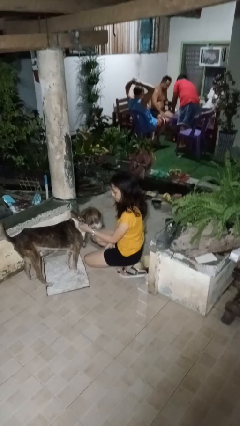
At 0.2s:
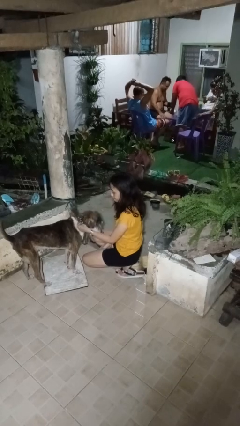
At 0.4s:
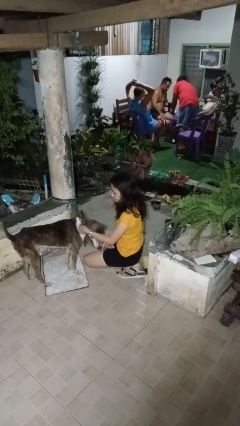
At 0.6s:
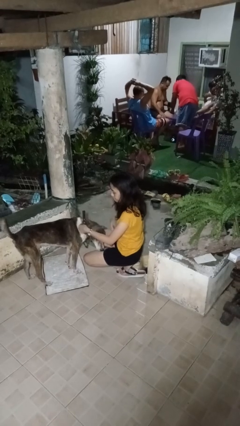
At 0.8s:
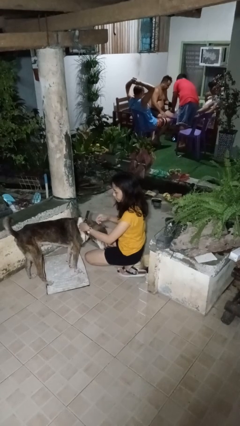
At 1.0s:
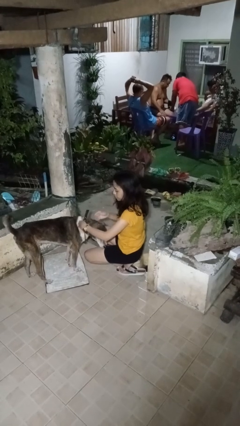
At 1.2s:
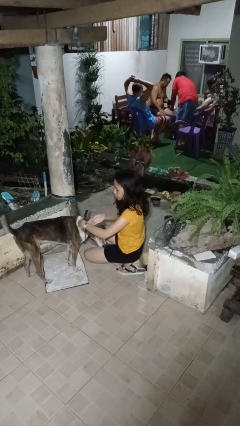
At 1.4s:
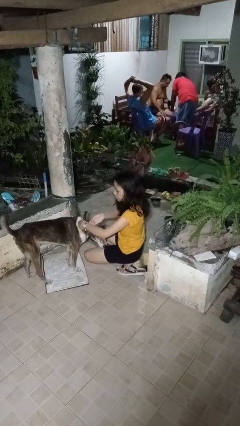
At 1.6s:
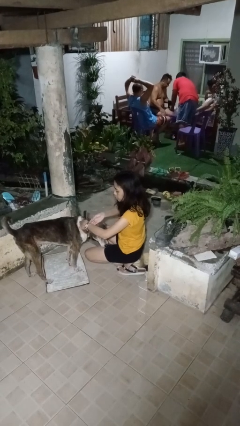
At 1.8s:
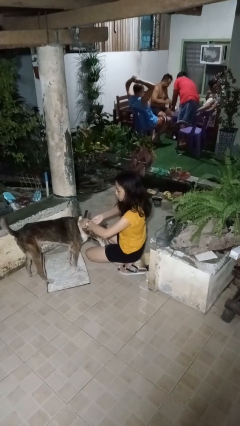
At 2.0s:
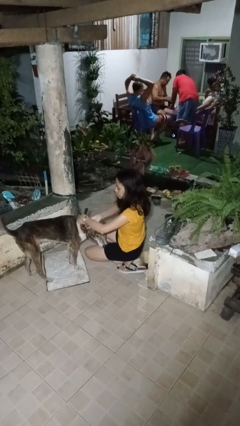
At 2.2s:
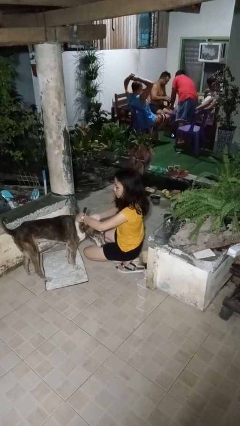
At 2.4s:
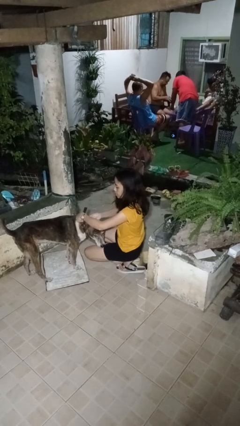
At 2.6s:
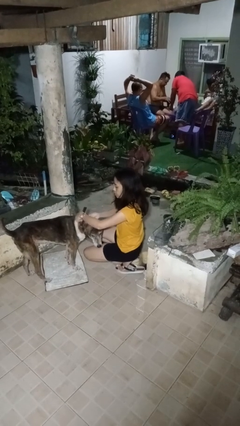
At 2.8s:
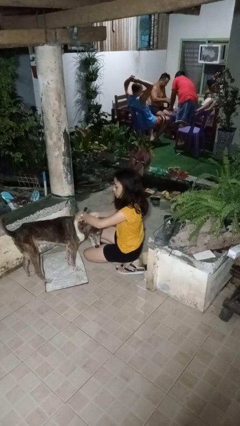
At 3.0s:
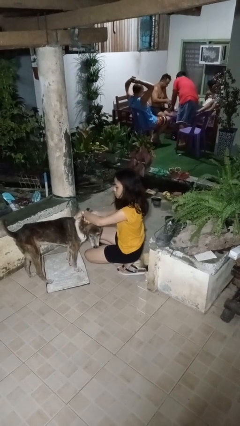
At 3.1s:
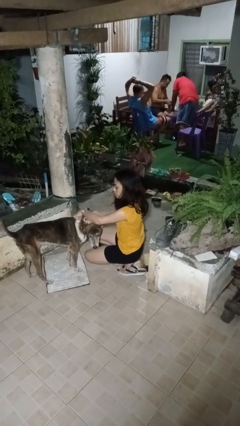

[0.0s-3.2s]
person unattaches leash from dog

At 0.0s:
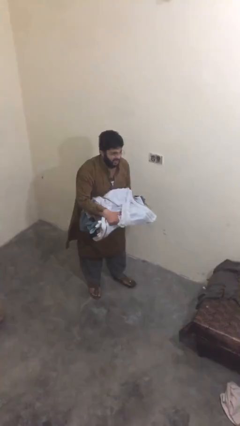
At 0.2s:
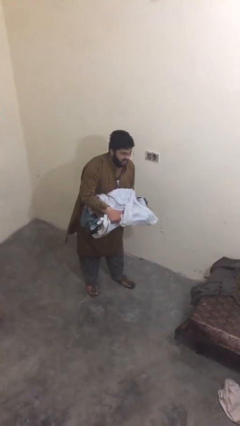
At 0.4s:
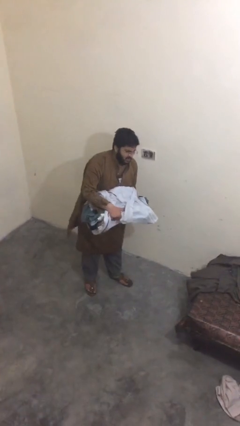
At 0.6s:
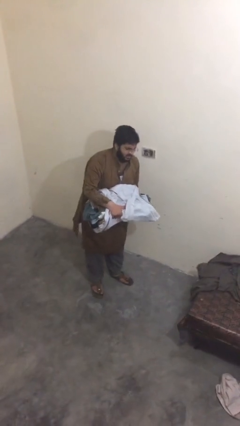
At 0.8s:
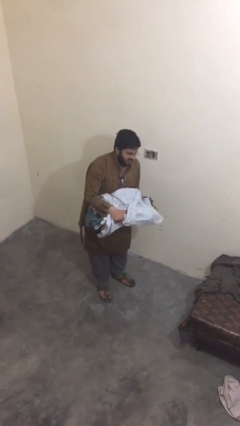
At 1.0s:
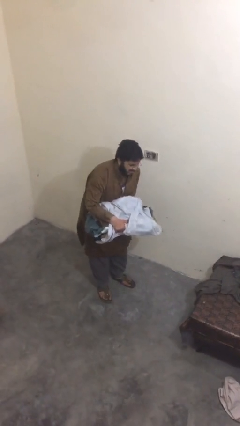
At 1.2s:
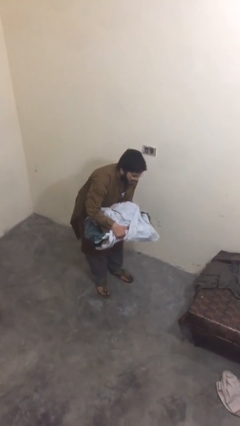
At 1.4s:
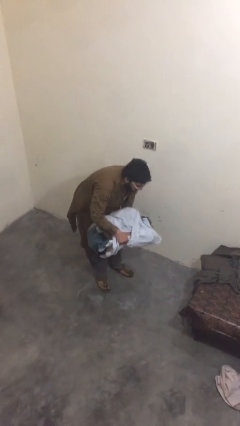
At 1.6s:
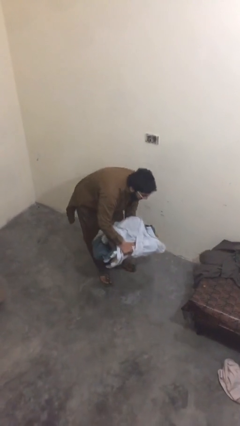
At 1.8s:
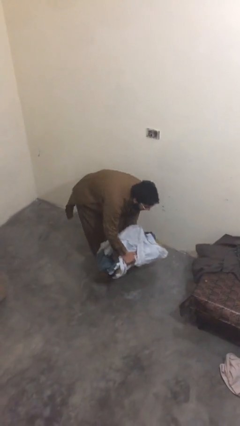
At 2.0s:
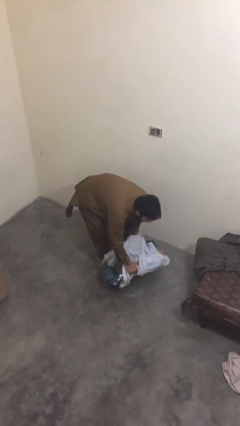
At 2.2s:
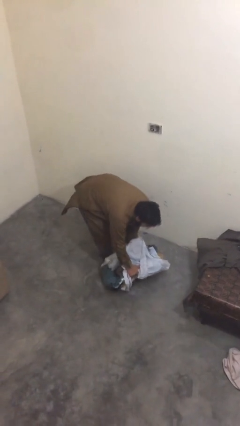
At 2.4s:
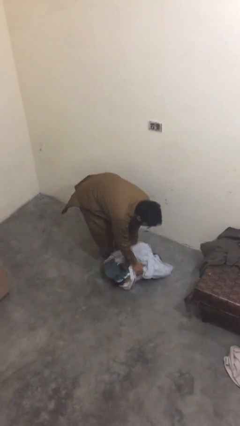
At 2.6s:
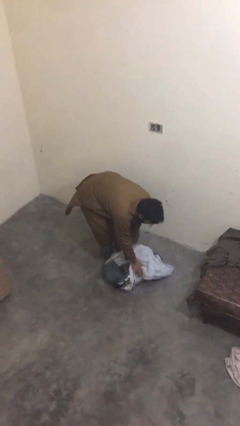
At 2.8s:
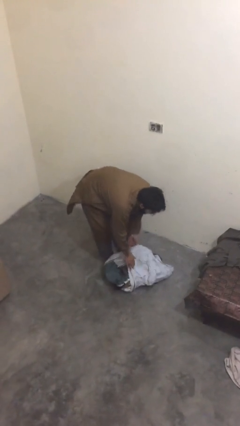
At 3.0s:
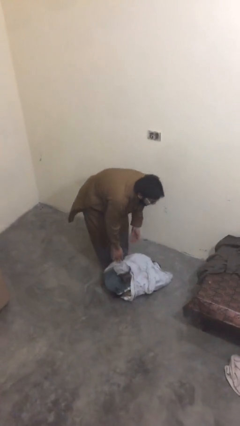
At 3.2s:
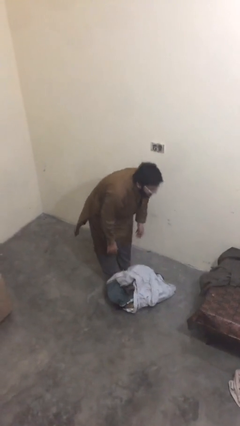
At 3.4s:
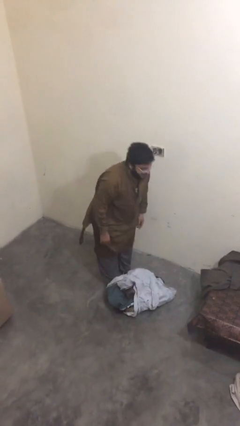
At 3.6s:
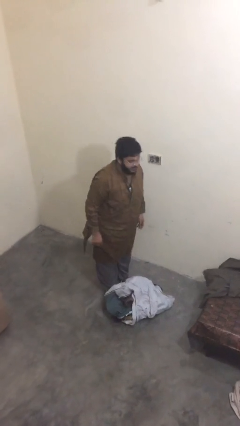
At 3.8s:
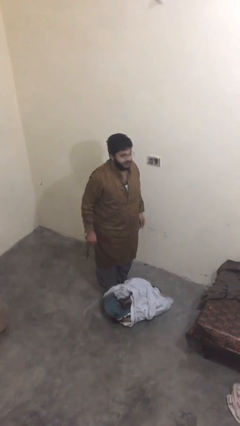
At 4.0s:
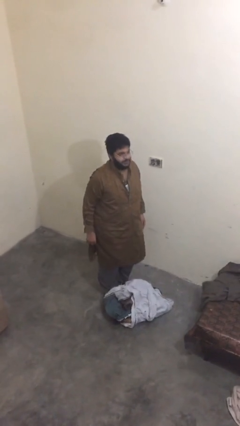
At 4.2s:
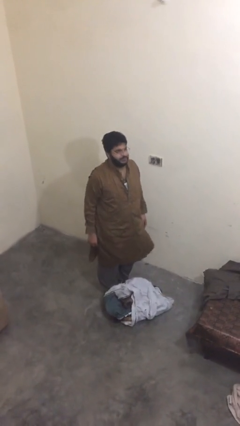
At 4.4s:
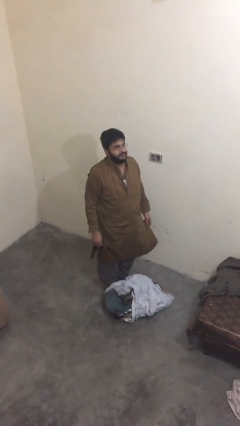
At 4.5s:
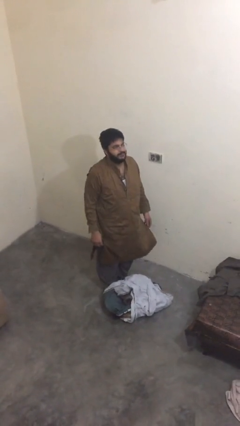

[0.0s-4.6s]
person puts down object on floor

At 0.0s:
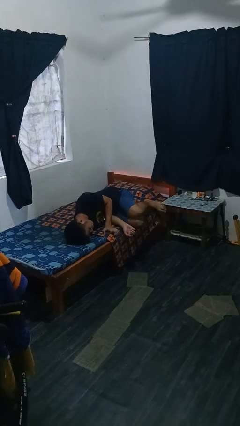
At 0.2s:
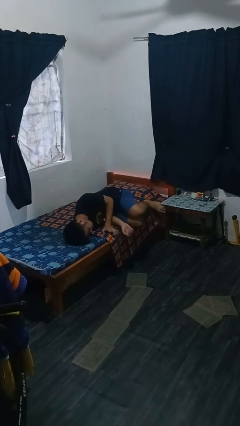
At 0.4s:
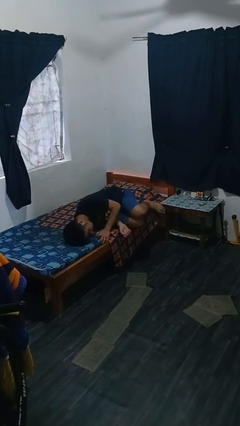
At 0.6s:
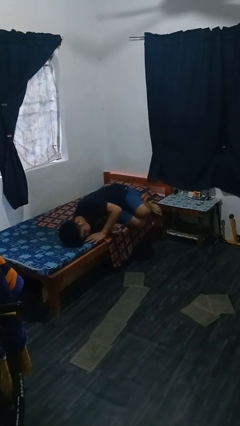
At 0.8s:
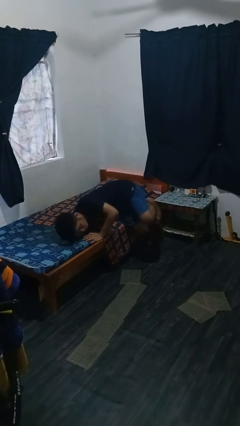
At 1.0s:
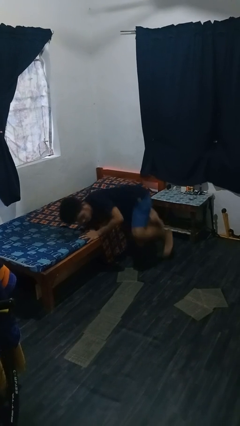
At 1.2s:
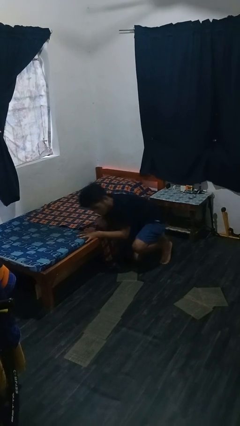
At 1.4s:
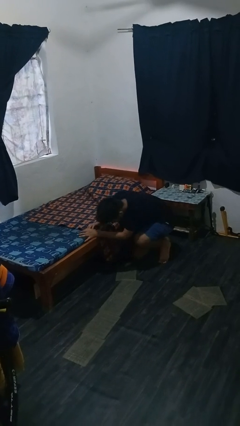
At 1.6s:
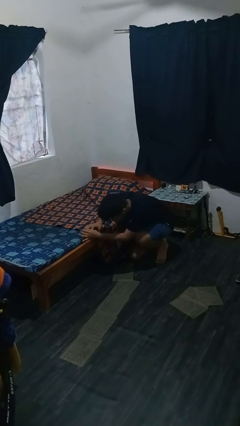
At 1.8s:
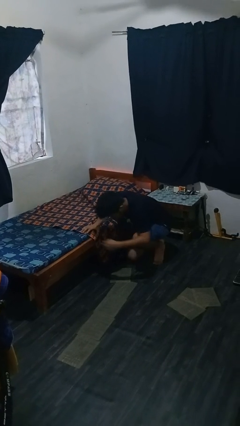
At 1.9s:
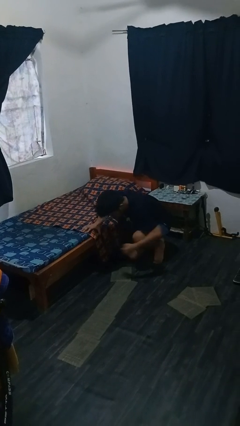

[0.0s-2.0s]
person falls from bed

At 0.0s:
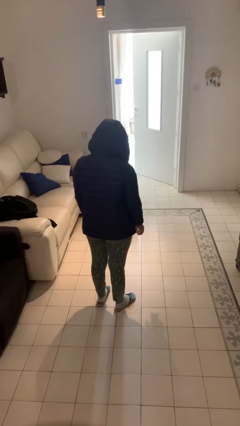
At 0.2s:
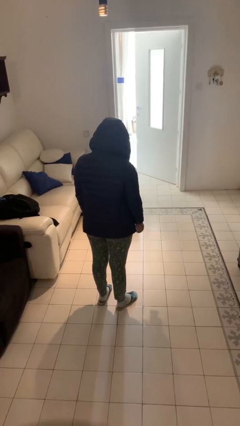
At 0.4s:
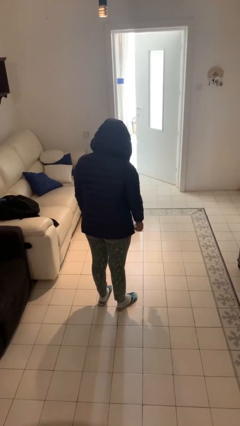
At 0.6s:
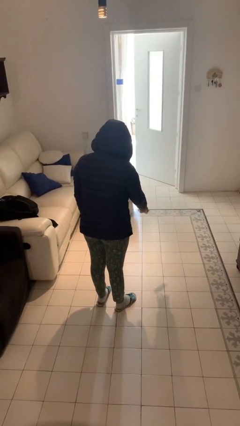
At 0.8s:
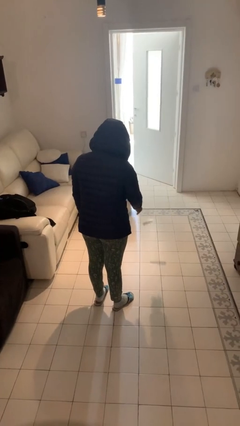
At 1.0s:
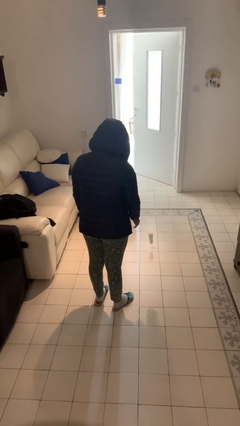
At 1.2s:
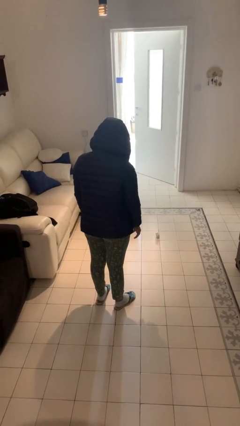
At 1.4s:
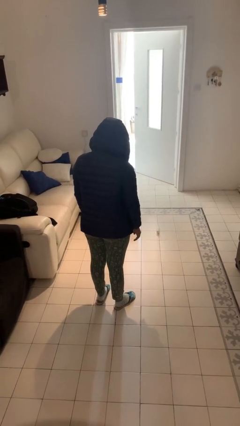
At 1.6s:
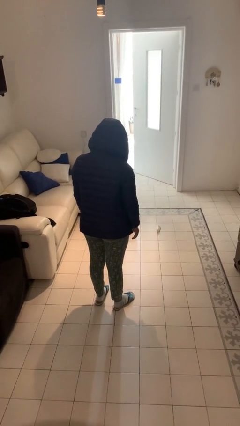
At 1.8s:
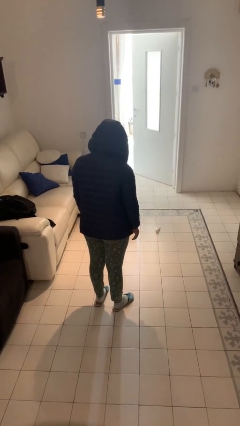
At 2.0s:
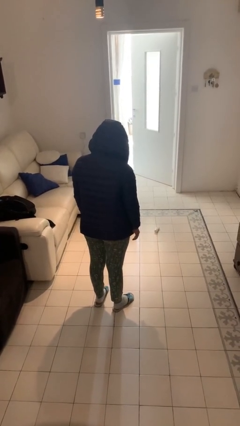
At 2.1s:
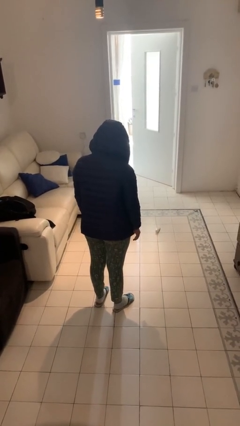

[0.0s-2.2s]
person throws object to ground

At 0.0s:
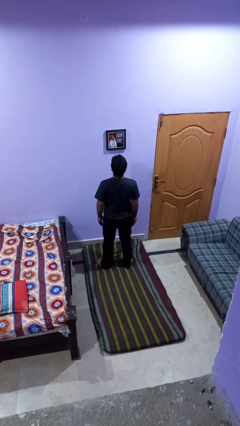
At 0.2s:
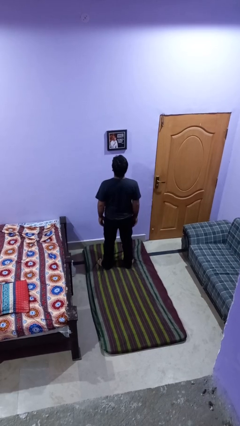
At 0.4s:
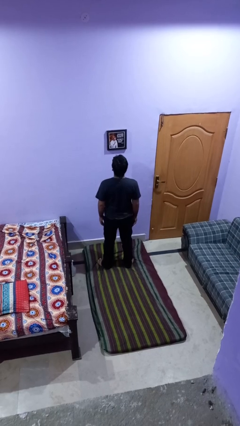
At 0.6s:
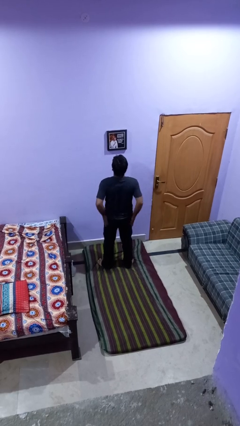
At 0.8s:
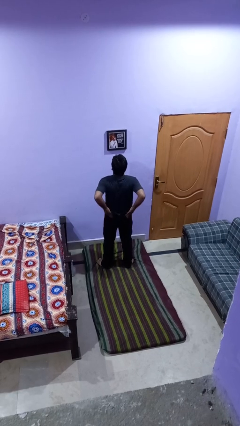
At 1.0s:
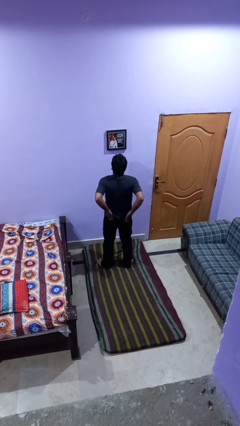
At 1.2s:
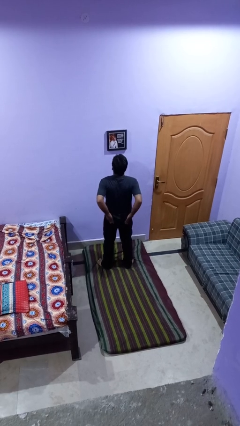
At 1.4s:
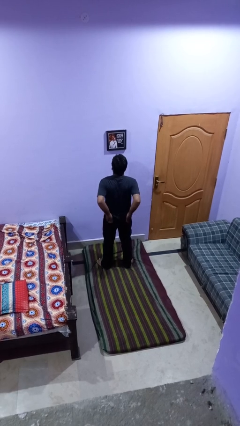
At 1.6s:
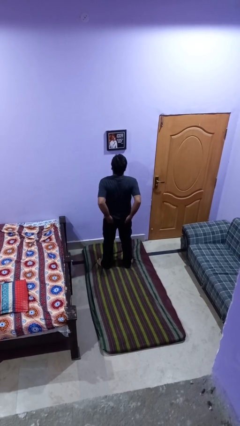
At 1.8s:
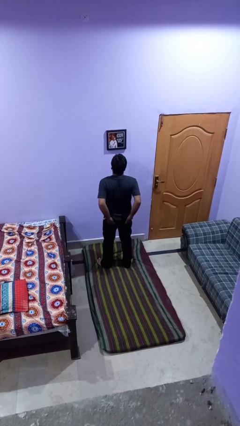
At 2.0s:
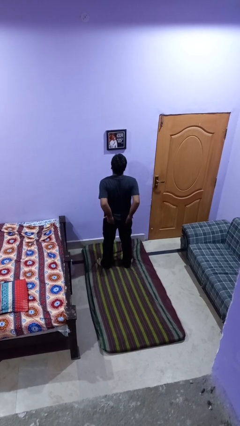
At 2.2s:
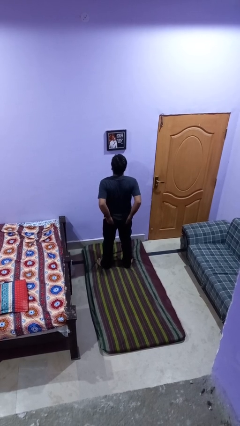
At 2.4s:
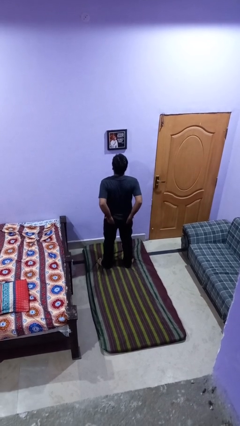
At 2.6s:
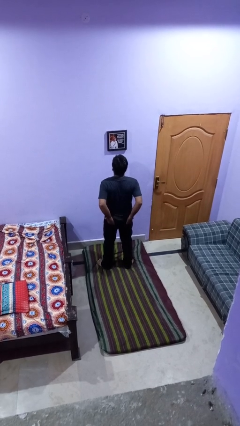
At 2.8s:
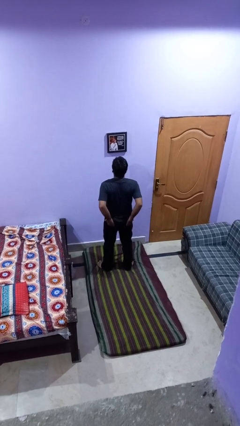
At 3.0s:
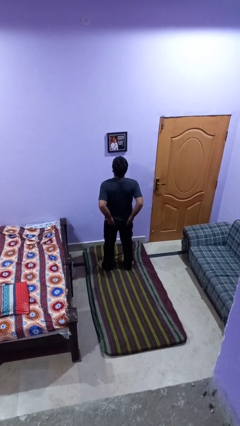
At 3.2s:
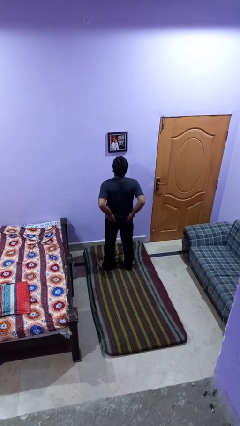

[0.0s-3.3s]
person puts hands in back pockets

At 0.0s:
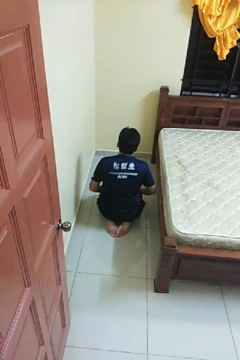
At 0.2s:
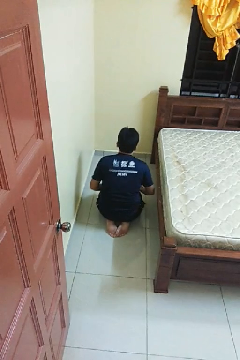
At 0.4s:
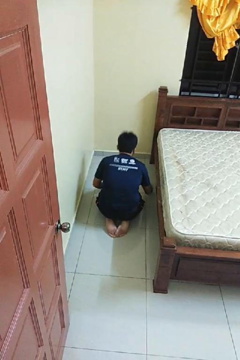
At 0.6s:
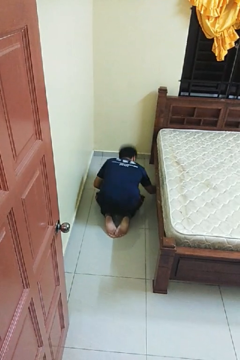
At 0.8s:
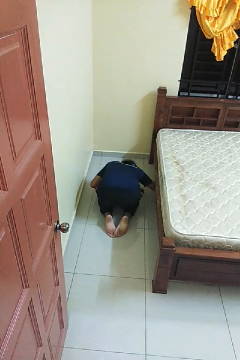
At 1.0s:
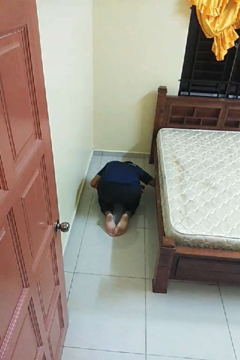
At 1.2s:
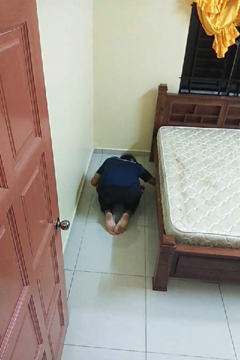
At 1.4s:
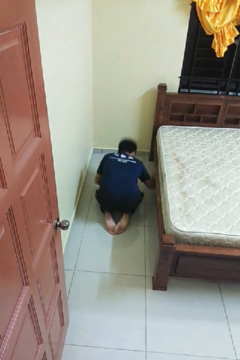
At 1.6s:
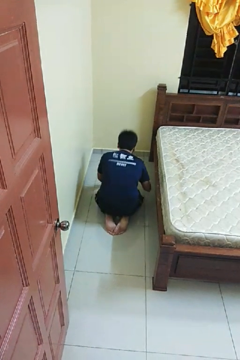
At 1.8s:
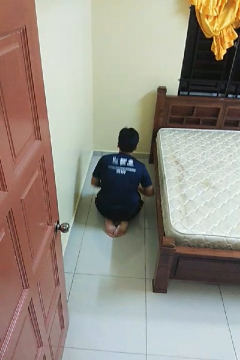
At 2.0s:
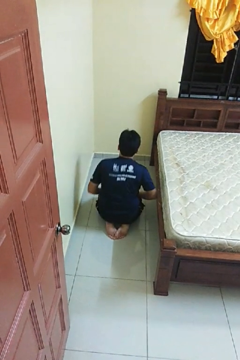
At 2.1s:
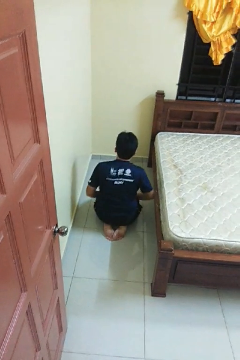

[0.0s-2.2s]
person searches under bed

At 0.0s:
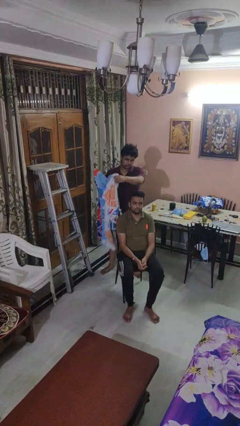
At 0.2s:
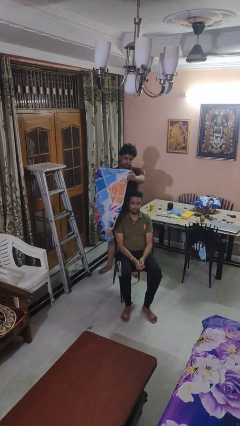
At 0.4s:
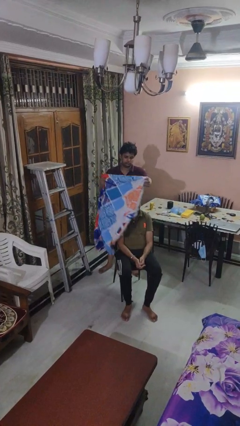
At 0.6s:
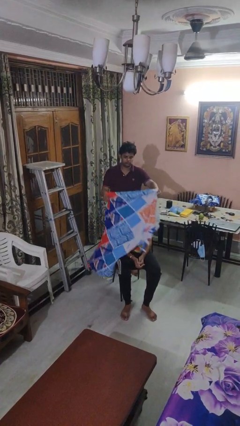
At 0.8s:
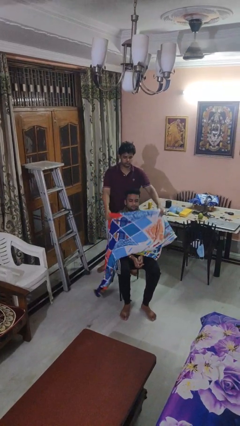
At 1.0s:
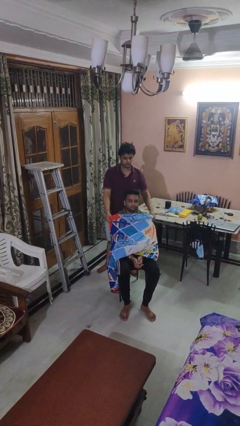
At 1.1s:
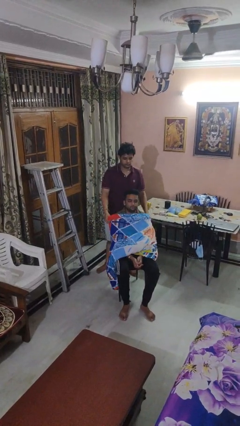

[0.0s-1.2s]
person covers friend with blanket
